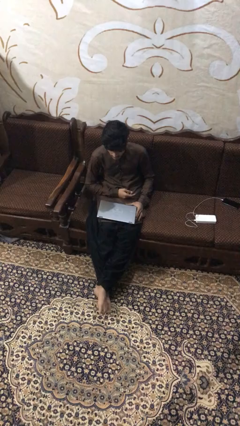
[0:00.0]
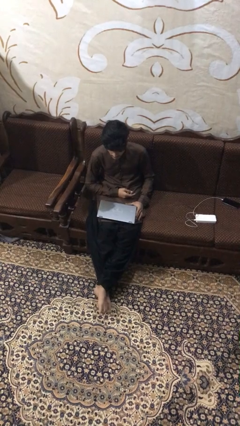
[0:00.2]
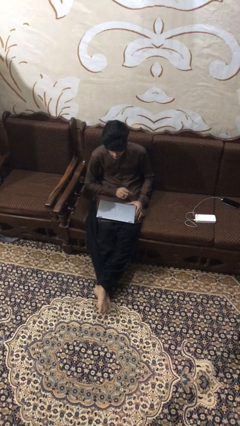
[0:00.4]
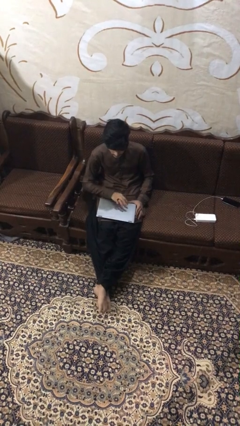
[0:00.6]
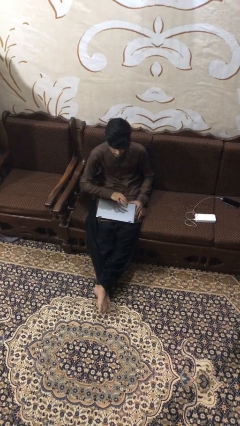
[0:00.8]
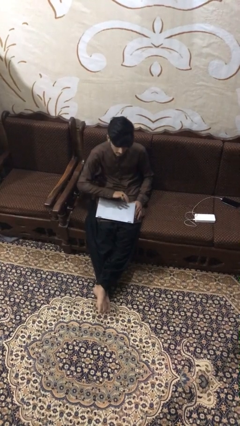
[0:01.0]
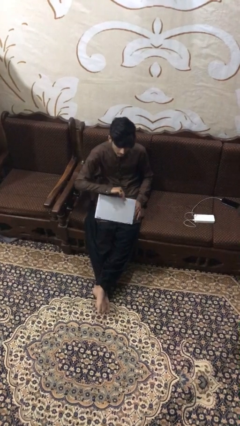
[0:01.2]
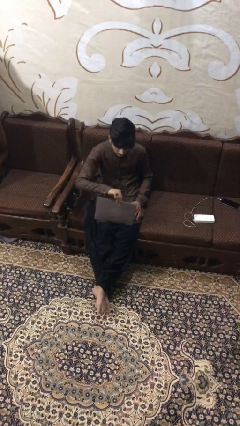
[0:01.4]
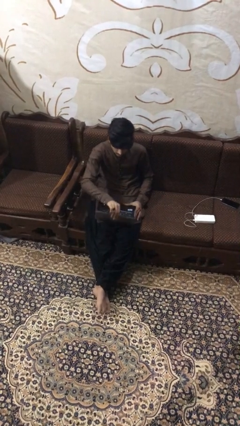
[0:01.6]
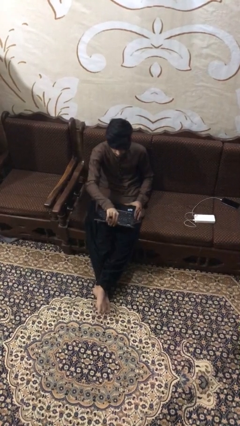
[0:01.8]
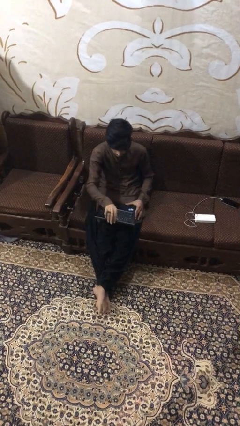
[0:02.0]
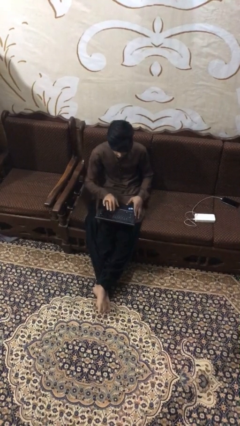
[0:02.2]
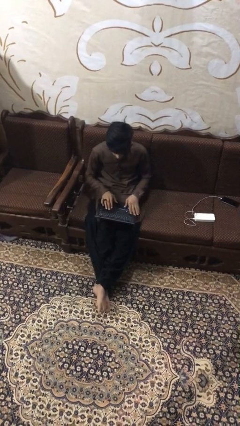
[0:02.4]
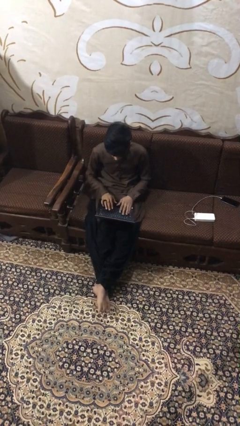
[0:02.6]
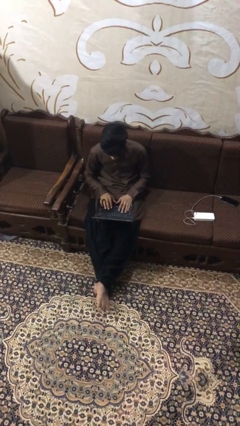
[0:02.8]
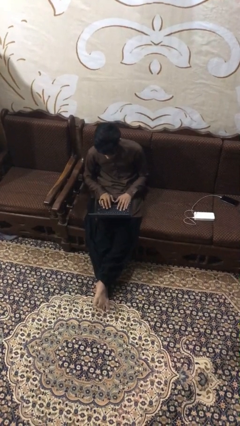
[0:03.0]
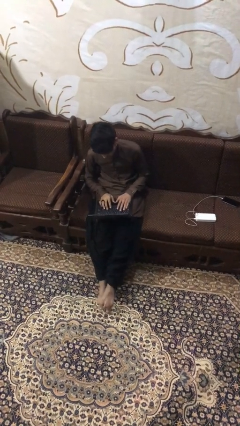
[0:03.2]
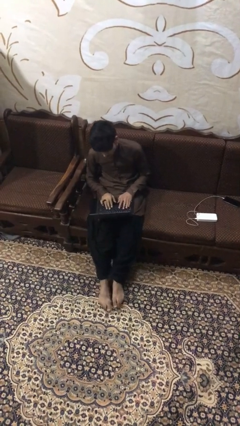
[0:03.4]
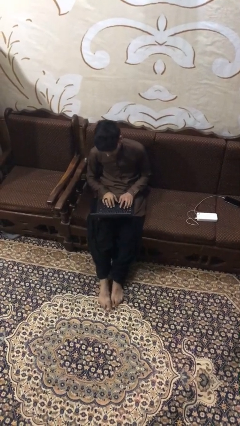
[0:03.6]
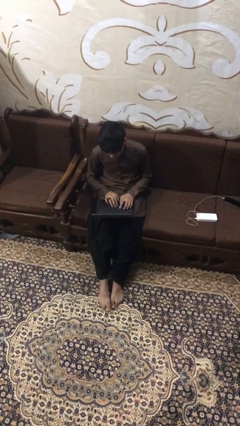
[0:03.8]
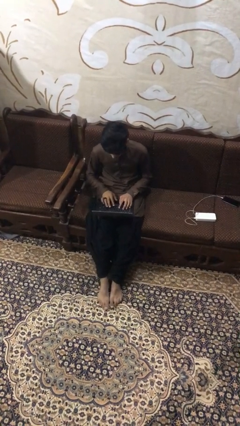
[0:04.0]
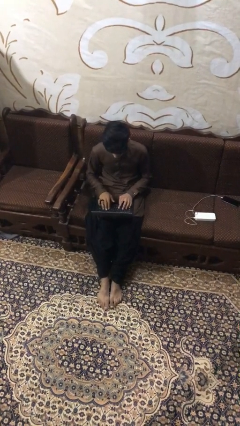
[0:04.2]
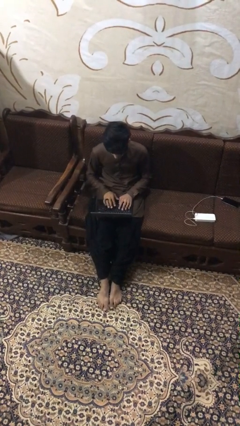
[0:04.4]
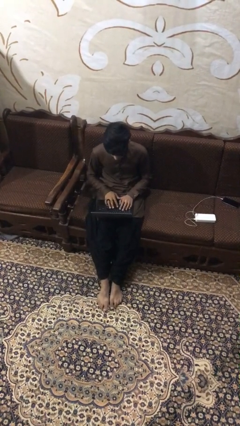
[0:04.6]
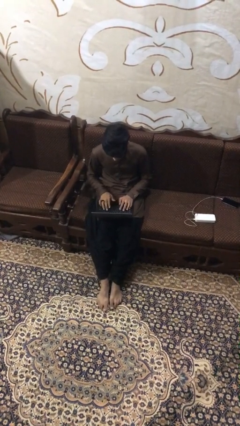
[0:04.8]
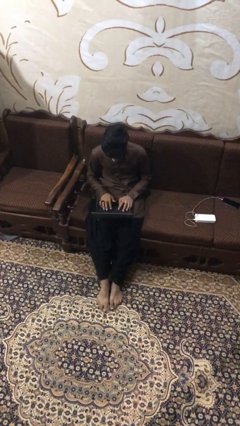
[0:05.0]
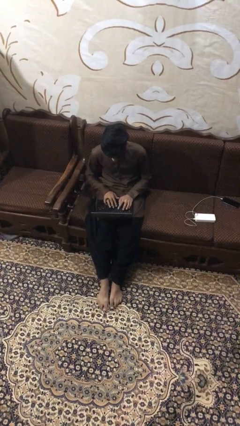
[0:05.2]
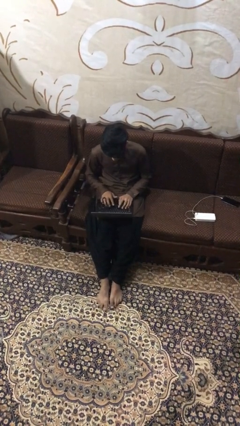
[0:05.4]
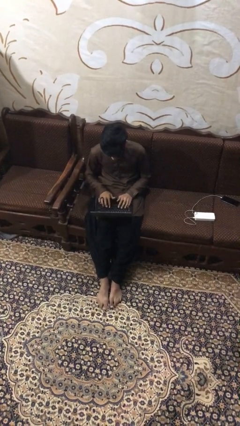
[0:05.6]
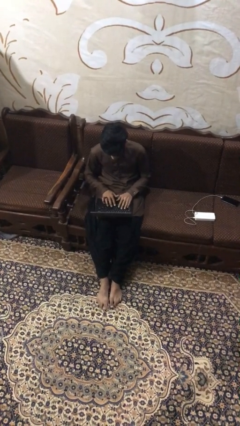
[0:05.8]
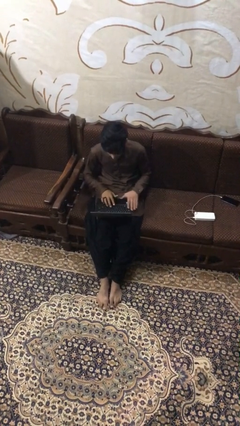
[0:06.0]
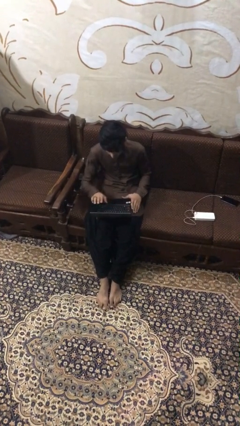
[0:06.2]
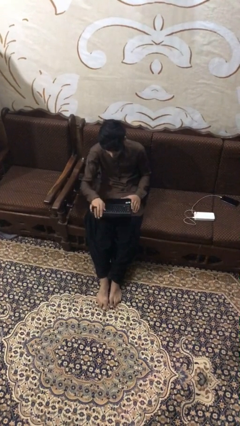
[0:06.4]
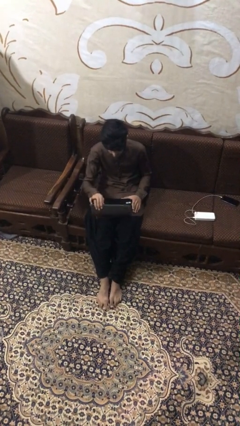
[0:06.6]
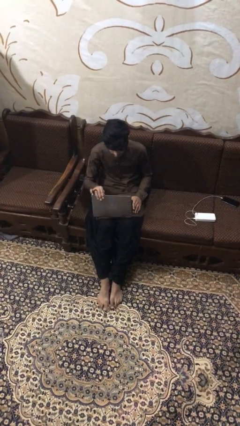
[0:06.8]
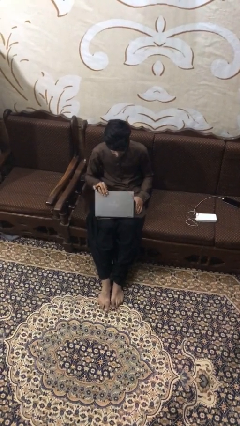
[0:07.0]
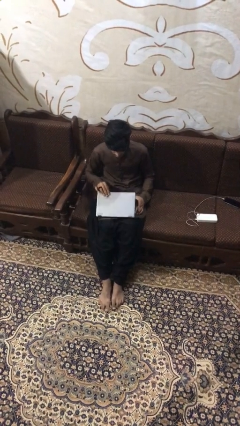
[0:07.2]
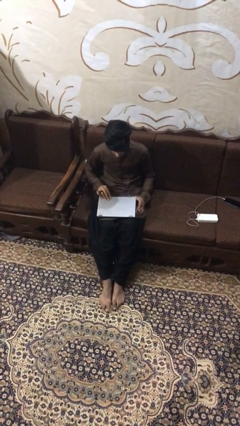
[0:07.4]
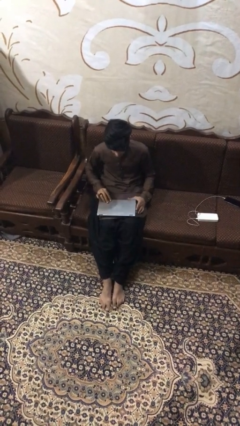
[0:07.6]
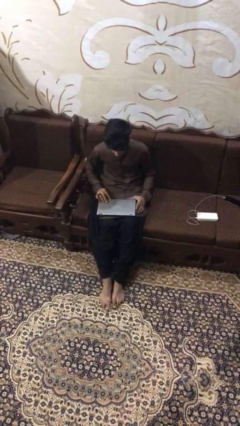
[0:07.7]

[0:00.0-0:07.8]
person interacts with laptop

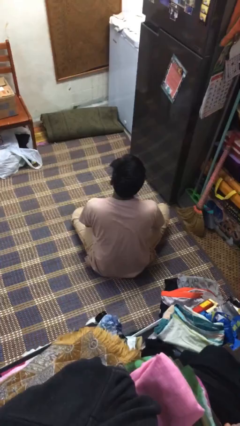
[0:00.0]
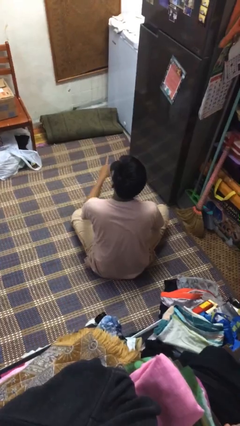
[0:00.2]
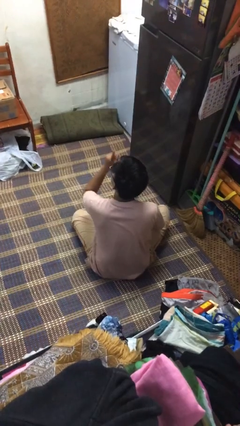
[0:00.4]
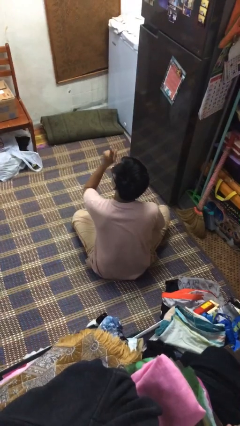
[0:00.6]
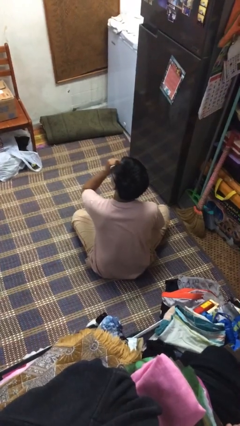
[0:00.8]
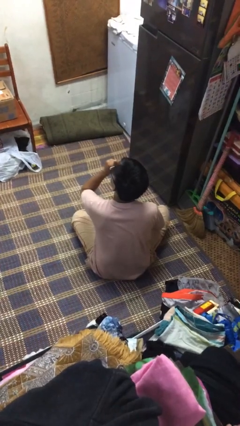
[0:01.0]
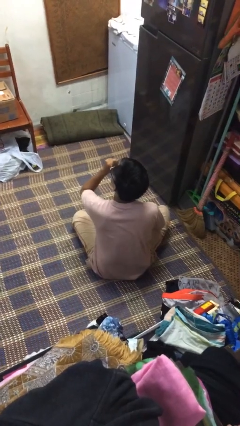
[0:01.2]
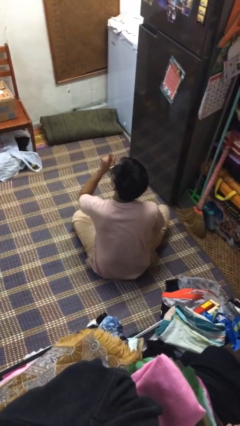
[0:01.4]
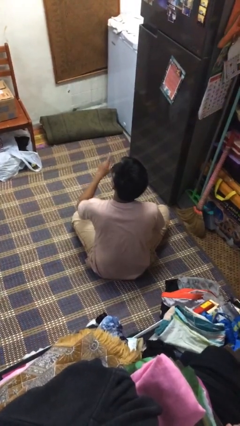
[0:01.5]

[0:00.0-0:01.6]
person gestures be quiet

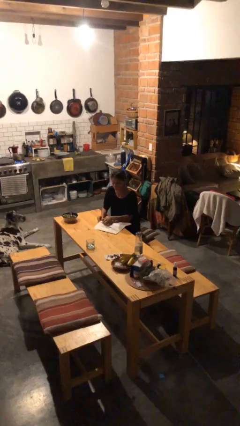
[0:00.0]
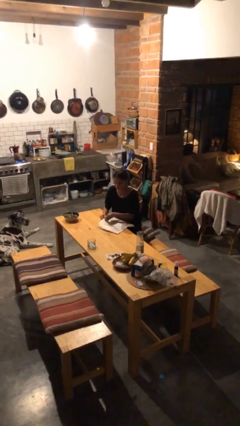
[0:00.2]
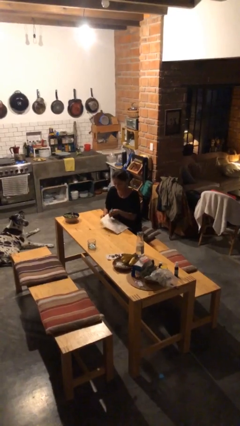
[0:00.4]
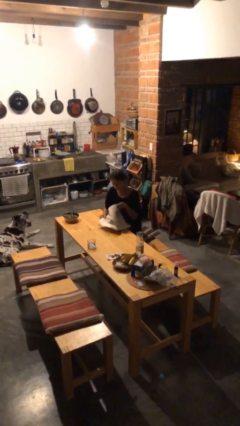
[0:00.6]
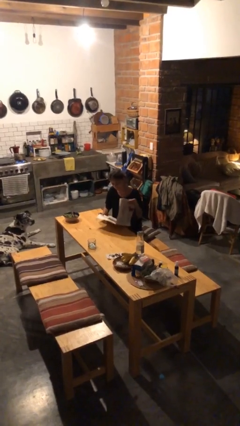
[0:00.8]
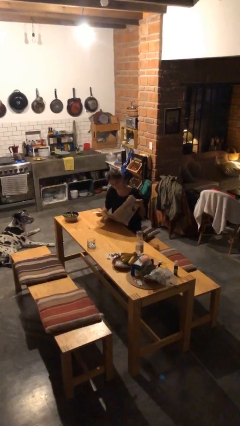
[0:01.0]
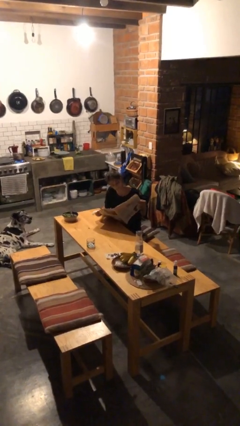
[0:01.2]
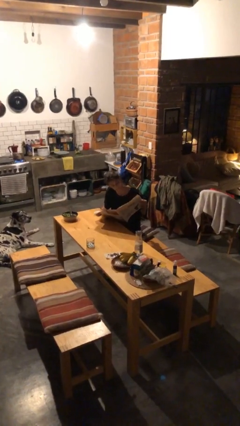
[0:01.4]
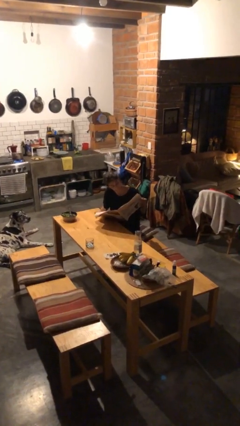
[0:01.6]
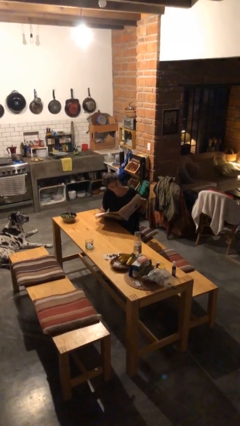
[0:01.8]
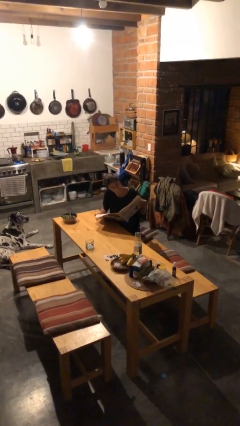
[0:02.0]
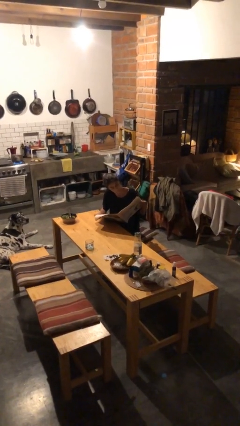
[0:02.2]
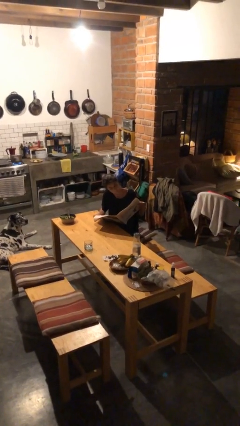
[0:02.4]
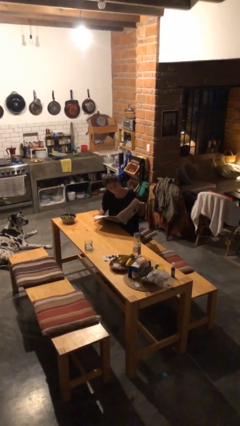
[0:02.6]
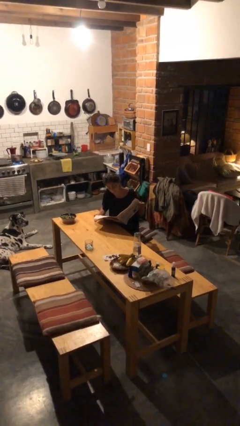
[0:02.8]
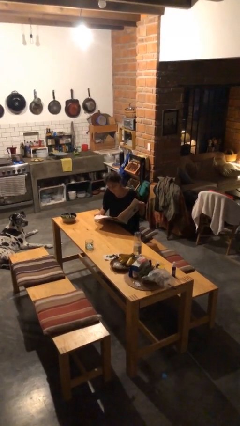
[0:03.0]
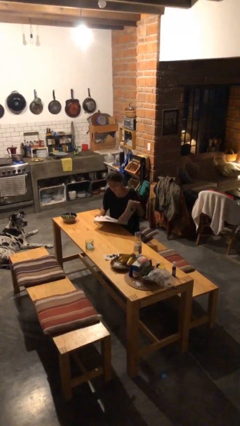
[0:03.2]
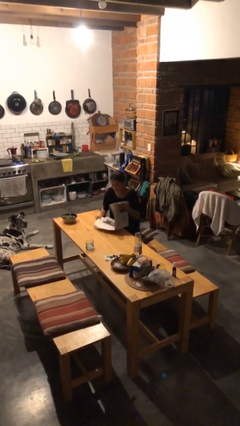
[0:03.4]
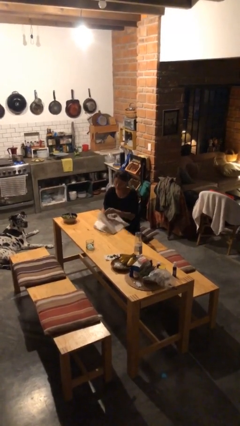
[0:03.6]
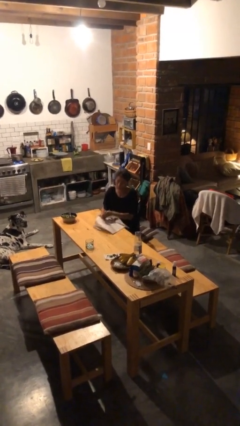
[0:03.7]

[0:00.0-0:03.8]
person reads newspaper

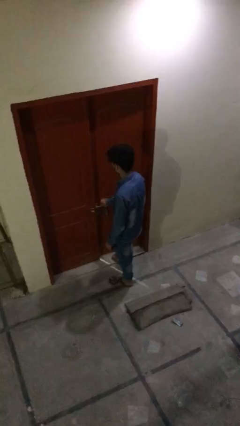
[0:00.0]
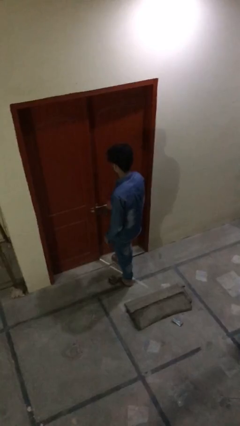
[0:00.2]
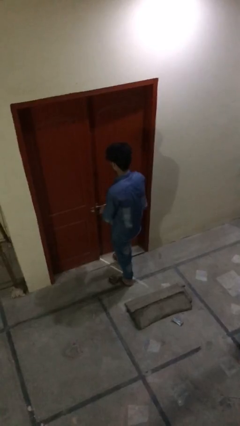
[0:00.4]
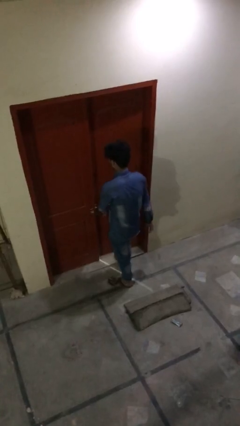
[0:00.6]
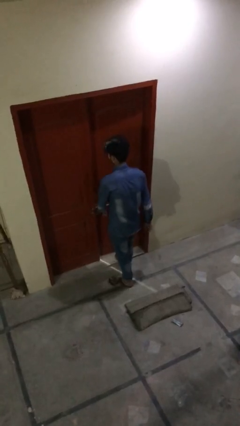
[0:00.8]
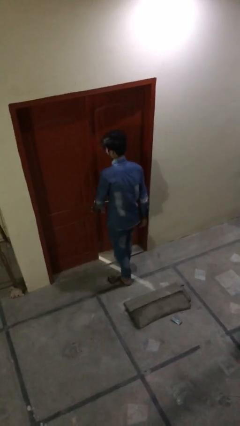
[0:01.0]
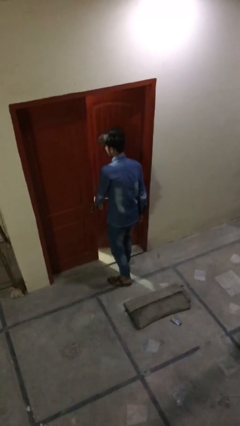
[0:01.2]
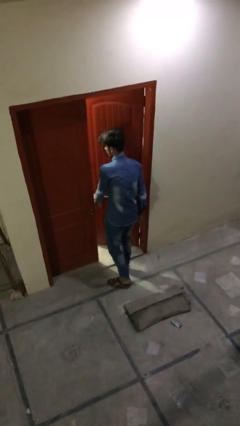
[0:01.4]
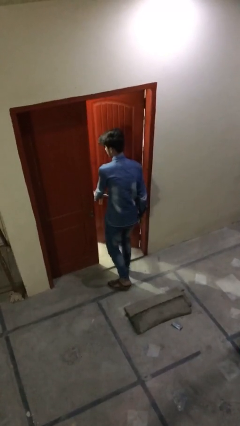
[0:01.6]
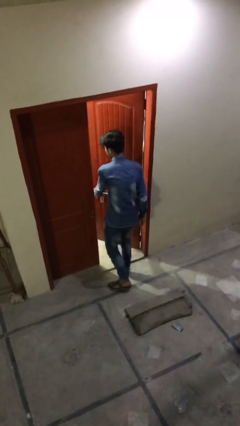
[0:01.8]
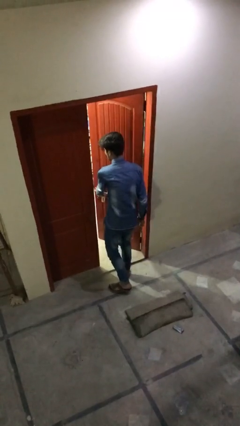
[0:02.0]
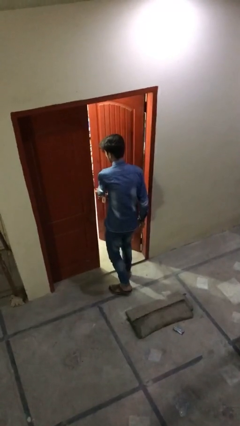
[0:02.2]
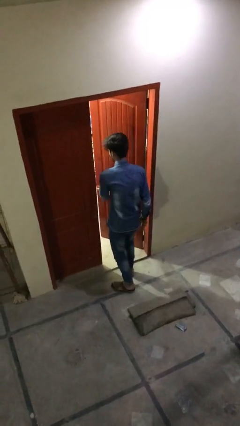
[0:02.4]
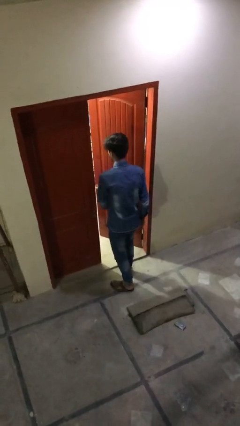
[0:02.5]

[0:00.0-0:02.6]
person opens facility door

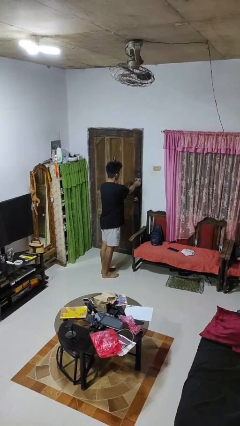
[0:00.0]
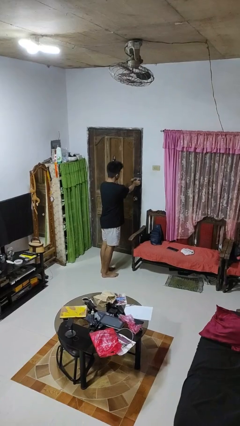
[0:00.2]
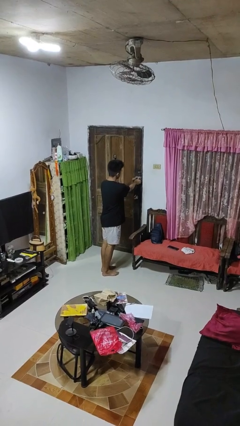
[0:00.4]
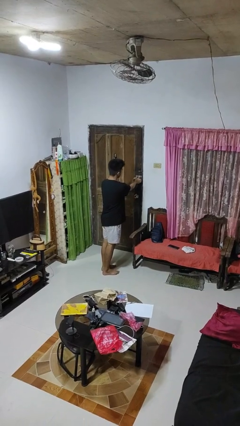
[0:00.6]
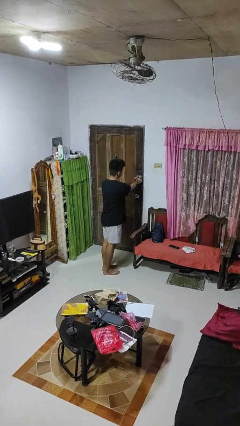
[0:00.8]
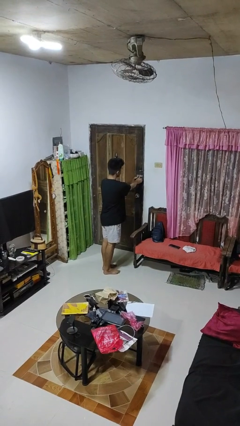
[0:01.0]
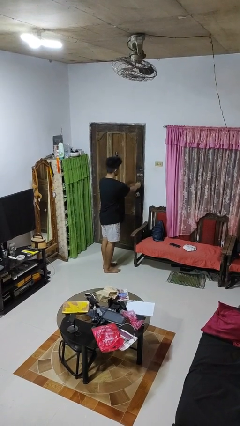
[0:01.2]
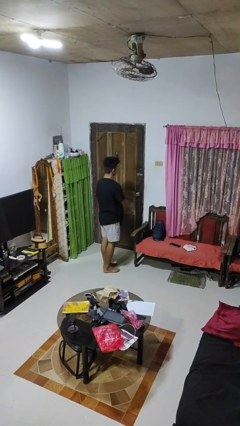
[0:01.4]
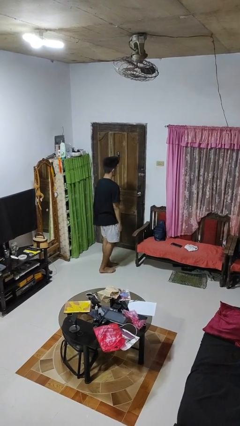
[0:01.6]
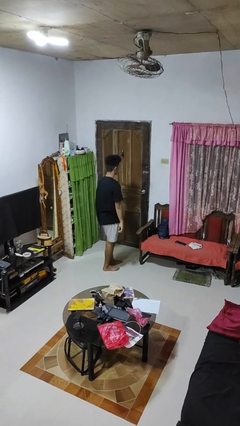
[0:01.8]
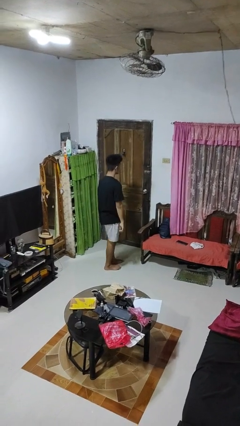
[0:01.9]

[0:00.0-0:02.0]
person locks door with keys

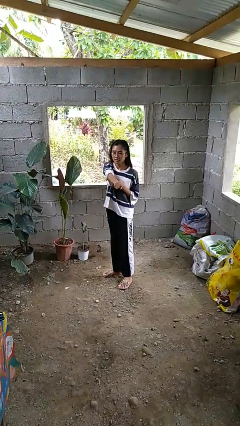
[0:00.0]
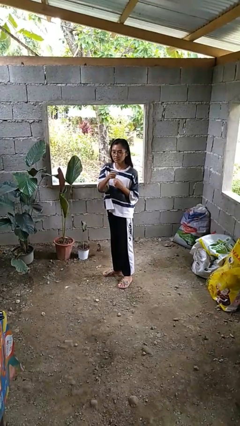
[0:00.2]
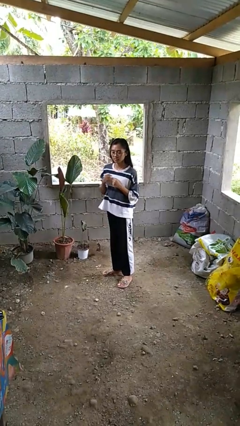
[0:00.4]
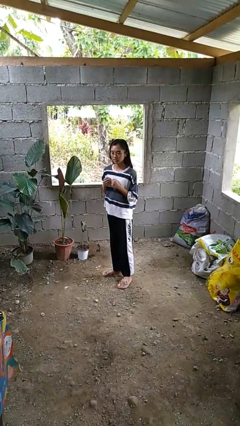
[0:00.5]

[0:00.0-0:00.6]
person karate chop
